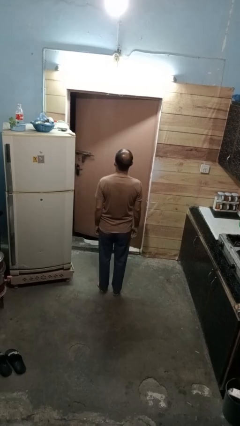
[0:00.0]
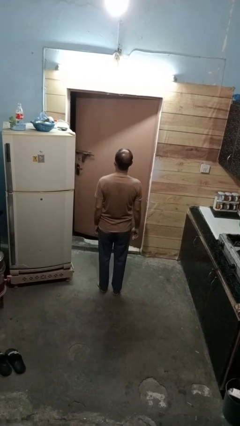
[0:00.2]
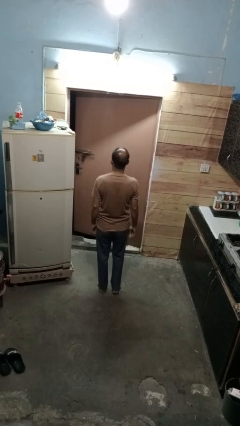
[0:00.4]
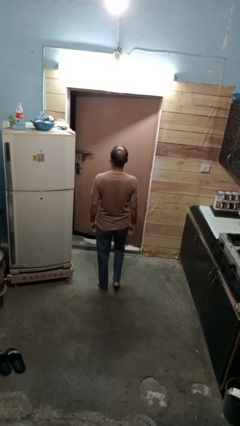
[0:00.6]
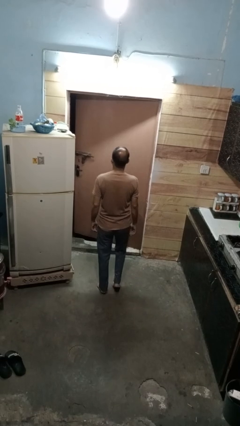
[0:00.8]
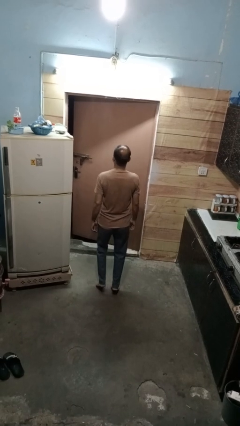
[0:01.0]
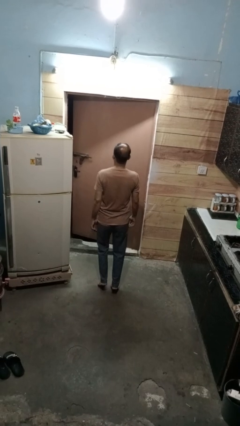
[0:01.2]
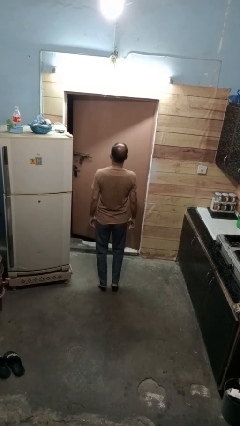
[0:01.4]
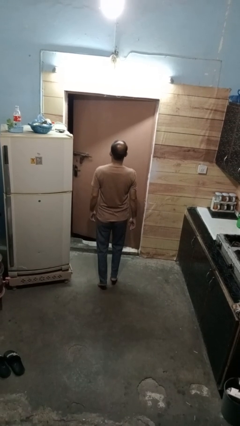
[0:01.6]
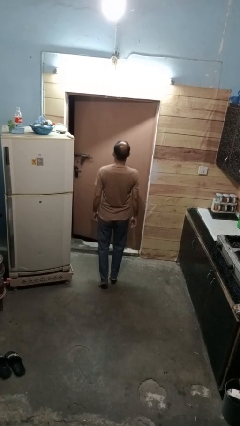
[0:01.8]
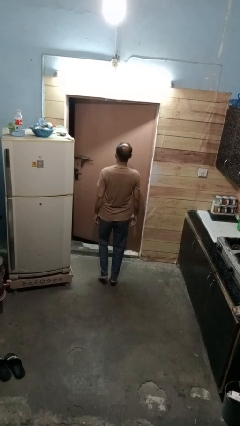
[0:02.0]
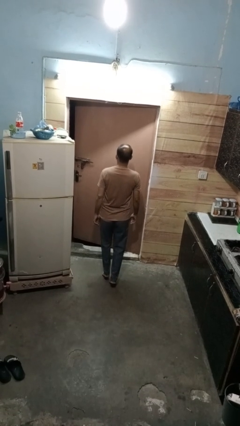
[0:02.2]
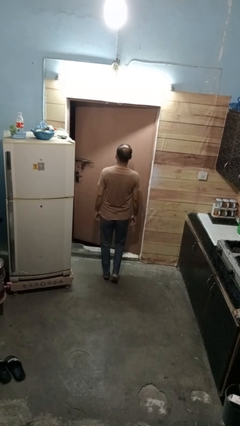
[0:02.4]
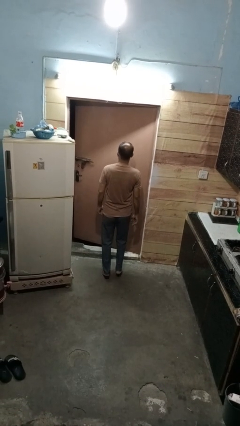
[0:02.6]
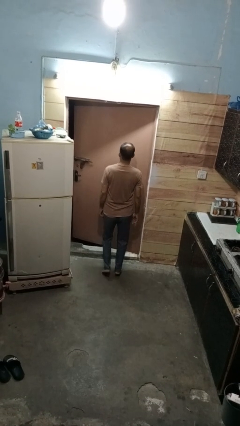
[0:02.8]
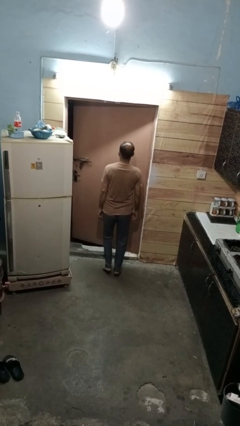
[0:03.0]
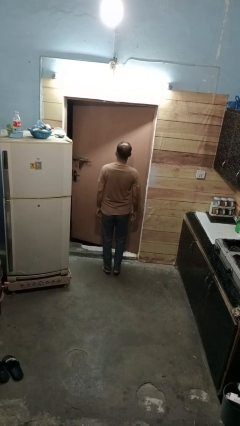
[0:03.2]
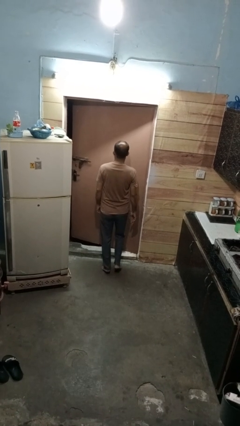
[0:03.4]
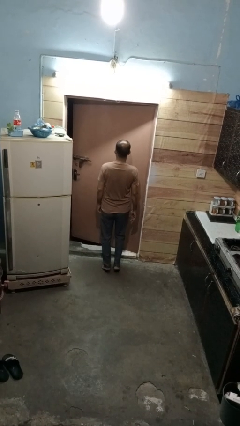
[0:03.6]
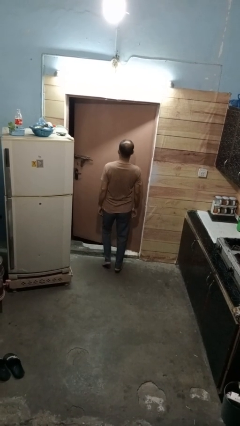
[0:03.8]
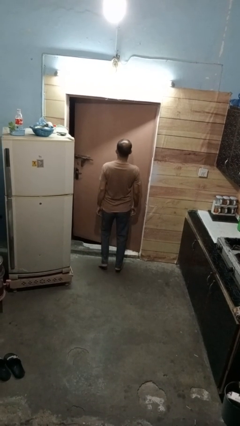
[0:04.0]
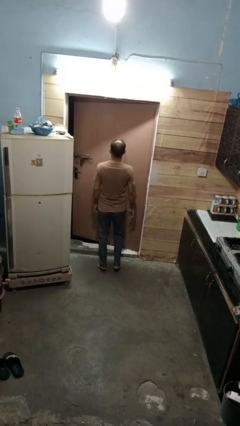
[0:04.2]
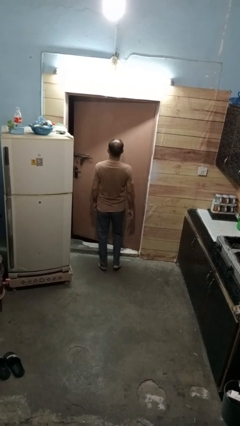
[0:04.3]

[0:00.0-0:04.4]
person walks tiptoe

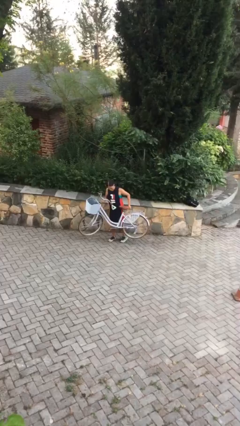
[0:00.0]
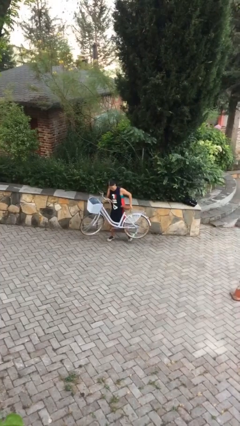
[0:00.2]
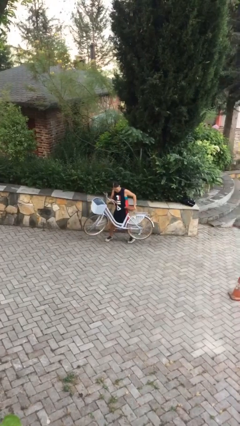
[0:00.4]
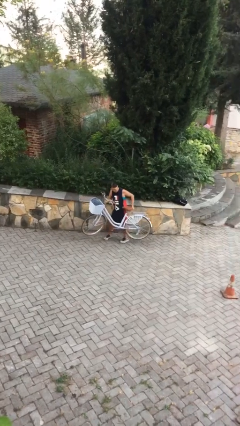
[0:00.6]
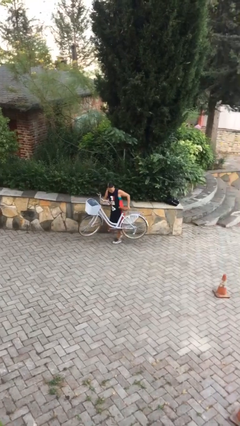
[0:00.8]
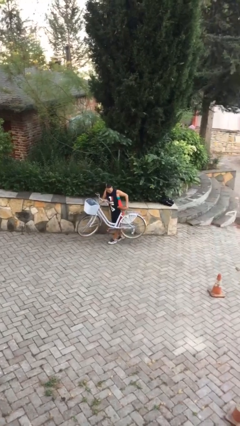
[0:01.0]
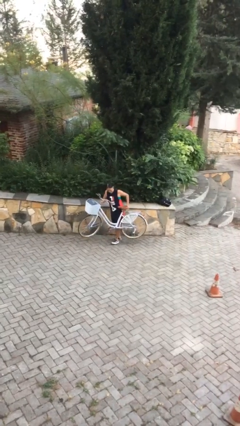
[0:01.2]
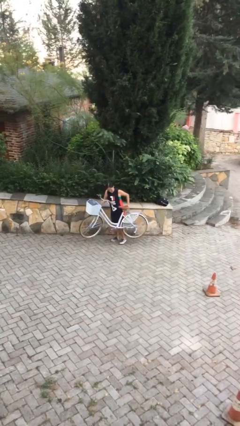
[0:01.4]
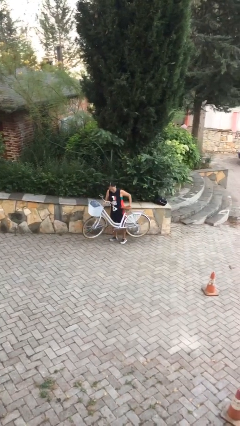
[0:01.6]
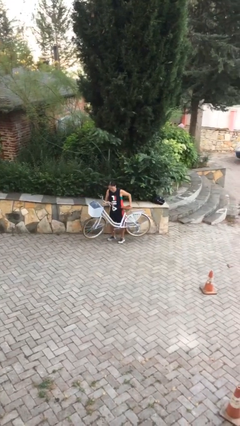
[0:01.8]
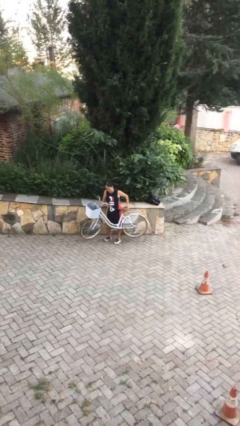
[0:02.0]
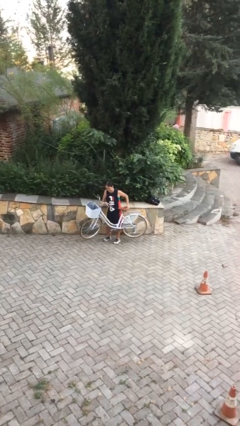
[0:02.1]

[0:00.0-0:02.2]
person carries bicycle

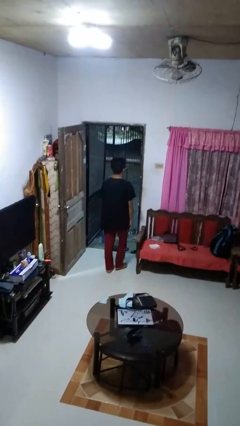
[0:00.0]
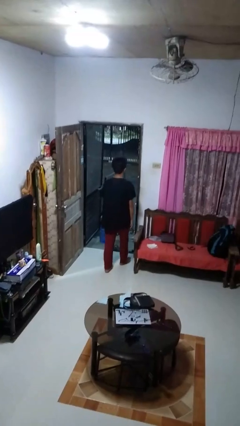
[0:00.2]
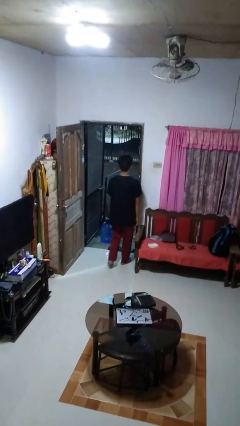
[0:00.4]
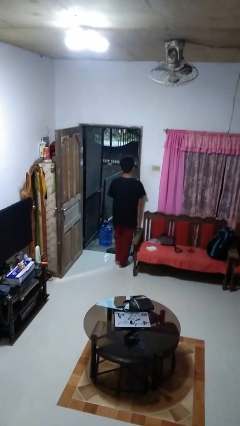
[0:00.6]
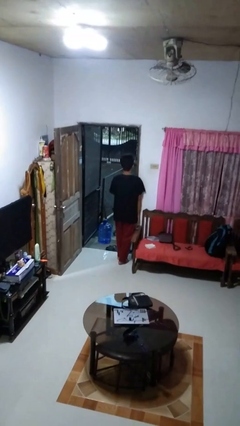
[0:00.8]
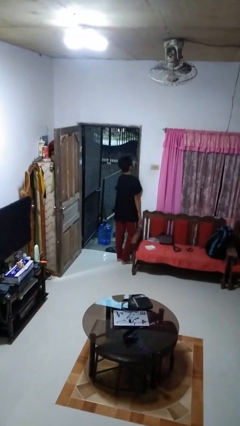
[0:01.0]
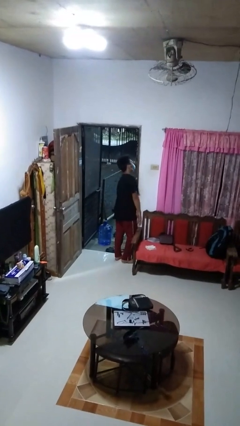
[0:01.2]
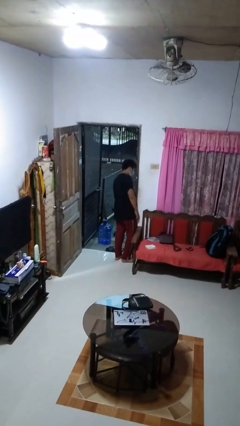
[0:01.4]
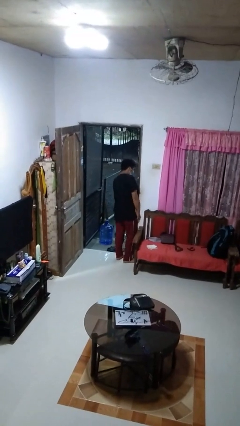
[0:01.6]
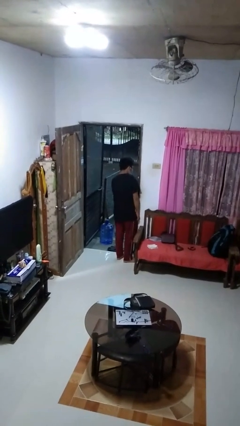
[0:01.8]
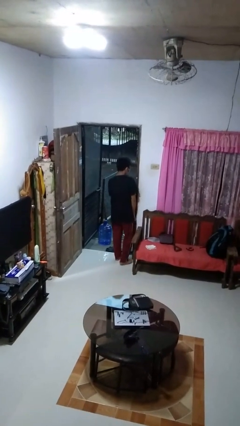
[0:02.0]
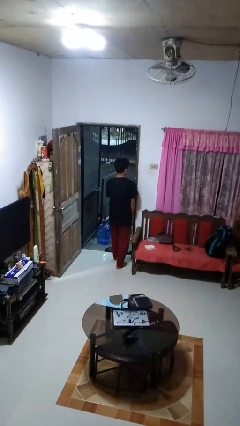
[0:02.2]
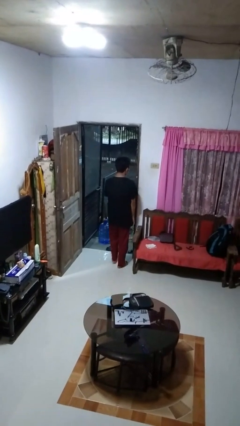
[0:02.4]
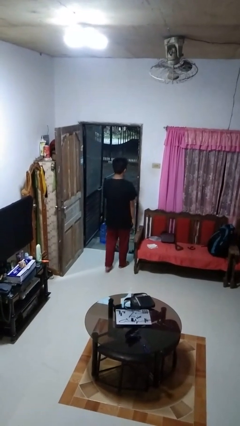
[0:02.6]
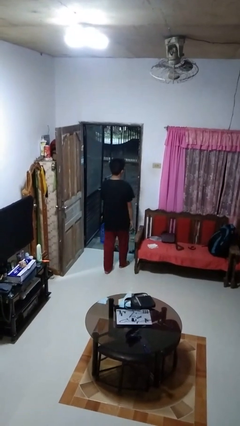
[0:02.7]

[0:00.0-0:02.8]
person bumps into wall

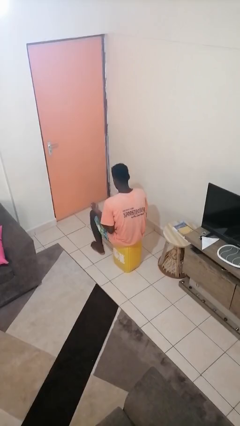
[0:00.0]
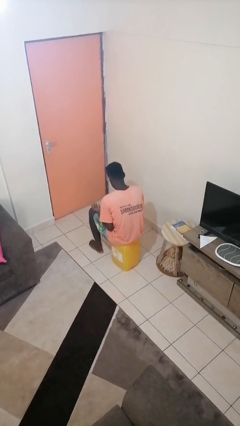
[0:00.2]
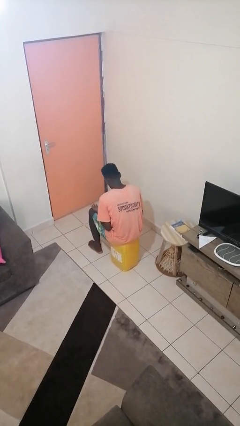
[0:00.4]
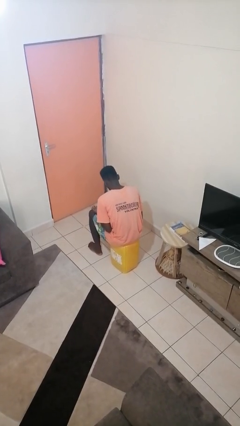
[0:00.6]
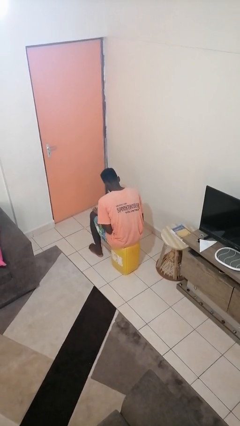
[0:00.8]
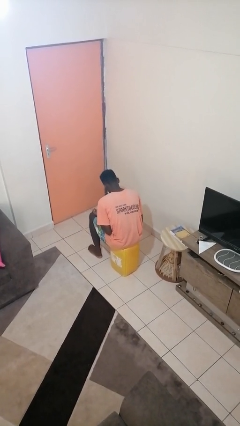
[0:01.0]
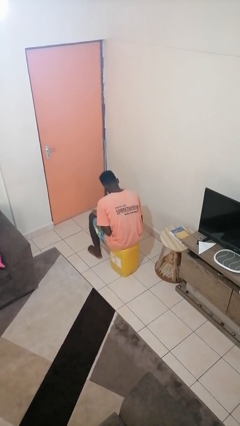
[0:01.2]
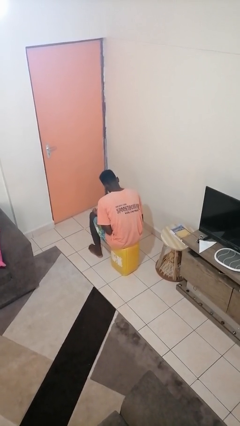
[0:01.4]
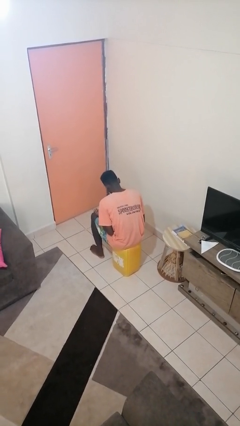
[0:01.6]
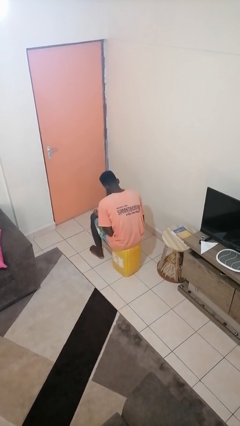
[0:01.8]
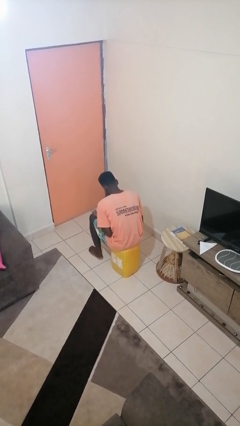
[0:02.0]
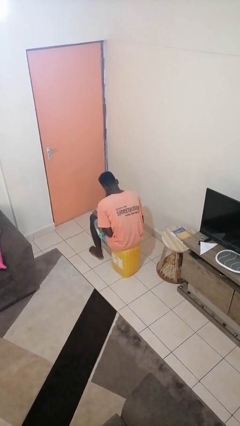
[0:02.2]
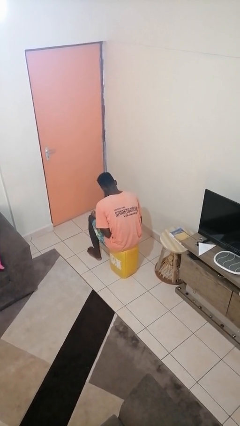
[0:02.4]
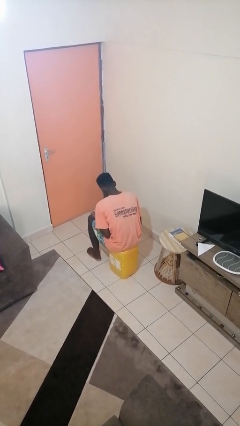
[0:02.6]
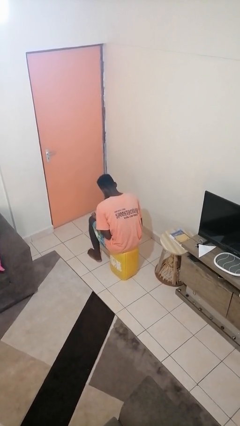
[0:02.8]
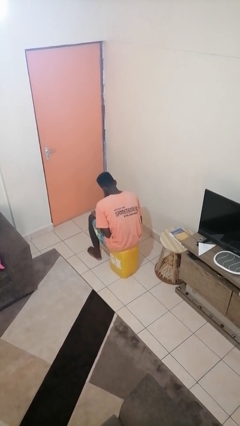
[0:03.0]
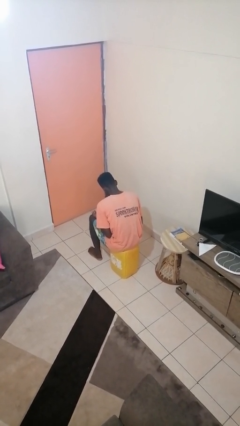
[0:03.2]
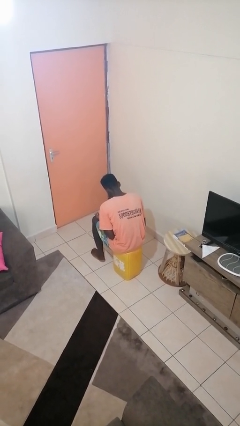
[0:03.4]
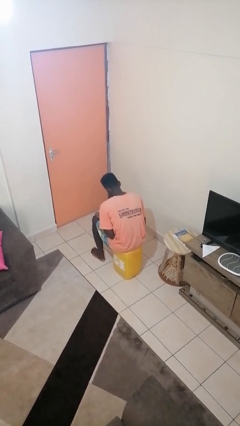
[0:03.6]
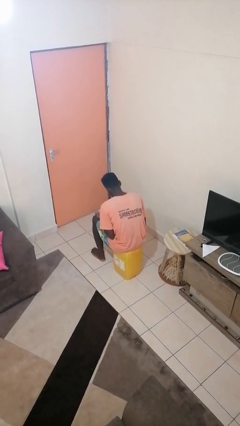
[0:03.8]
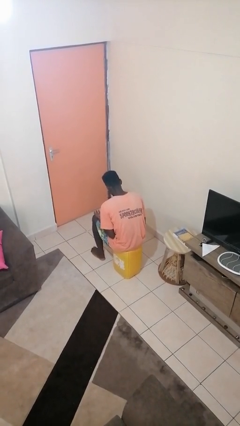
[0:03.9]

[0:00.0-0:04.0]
person looks at hands in lap

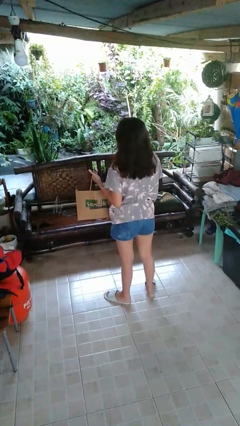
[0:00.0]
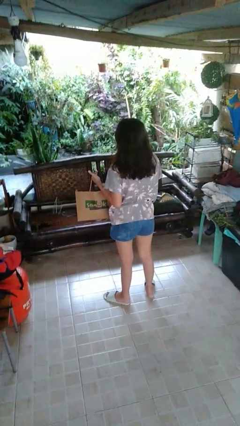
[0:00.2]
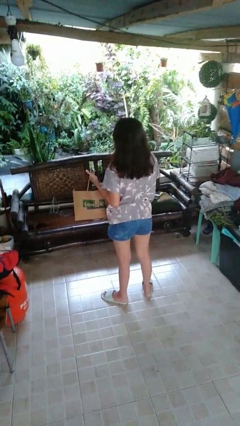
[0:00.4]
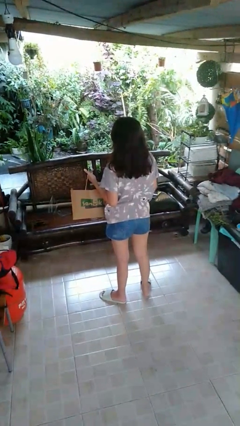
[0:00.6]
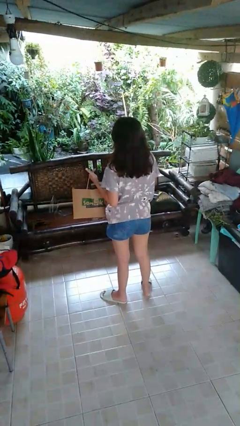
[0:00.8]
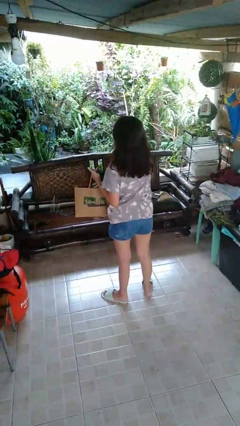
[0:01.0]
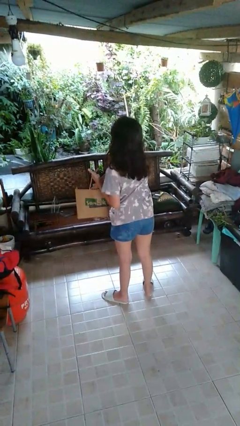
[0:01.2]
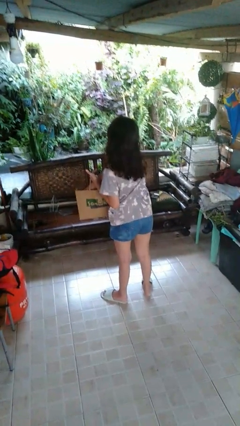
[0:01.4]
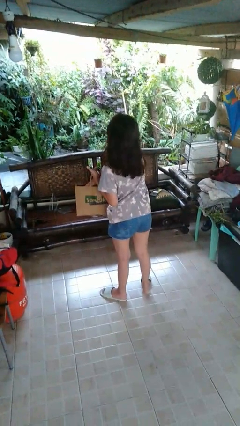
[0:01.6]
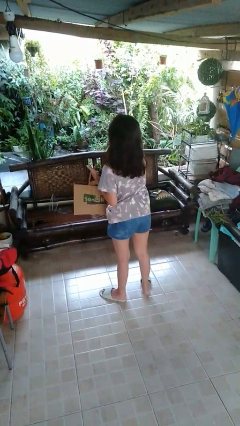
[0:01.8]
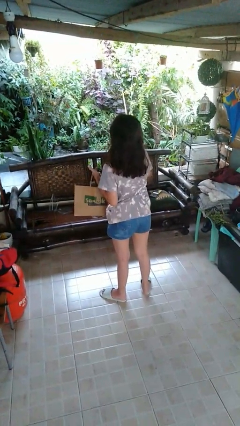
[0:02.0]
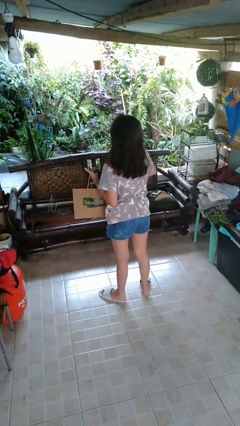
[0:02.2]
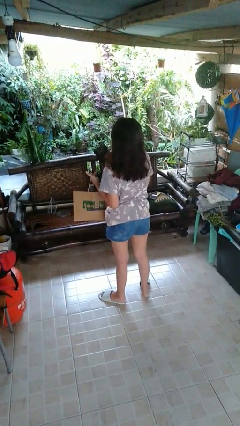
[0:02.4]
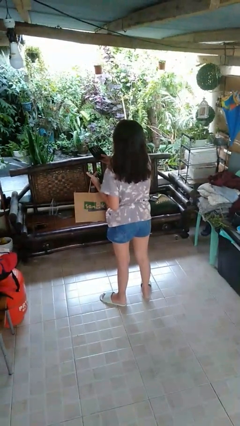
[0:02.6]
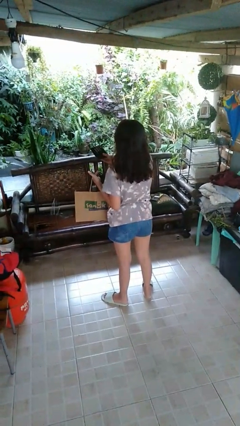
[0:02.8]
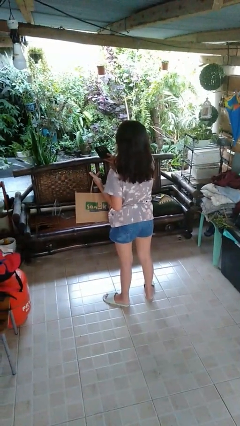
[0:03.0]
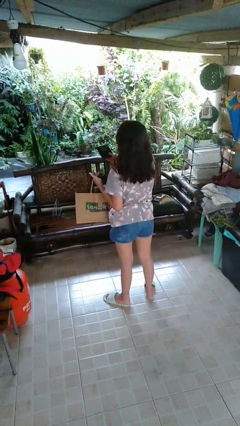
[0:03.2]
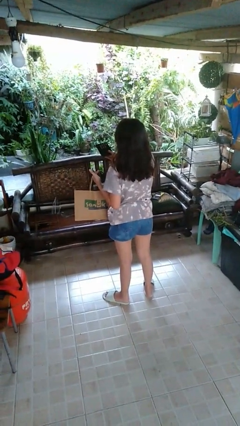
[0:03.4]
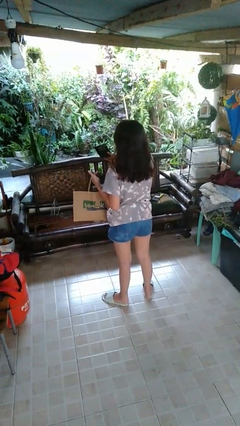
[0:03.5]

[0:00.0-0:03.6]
person takes object from bag

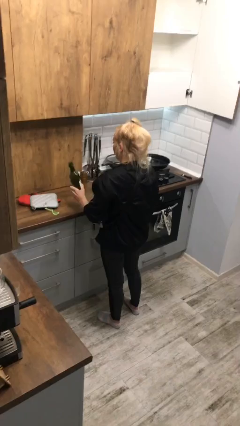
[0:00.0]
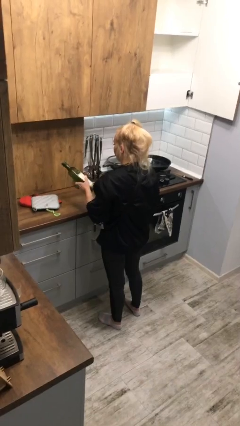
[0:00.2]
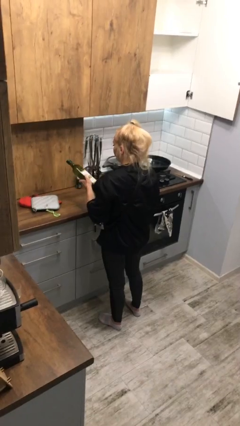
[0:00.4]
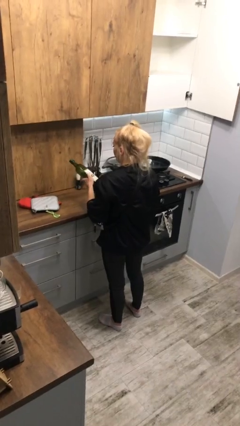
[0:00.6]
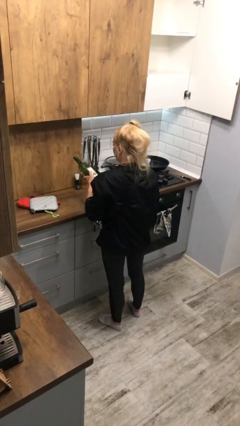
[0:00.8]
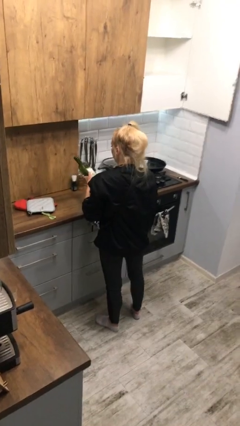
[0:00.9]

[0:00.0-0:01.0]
person picks up object from table
